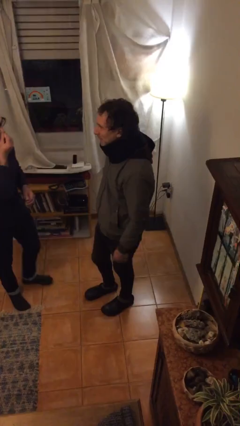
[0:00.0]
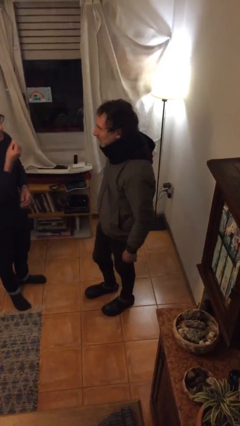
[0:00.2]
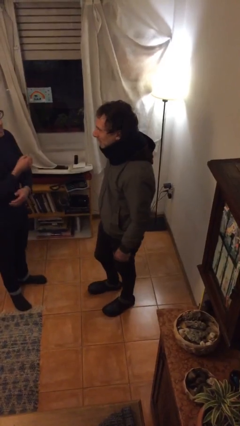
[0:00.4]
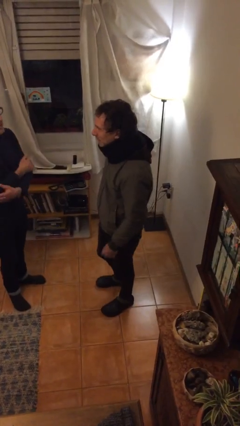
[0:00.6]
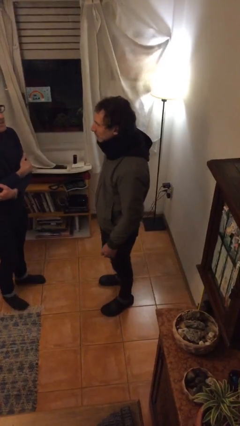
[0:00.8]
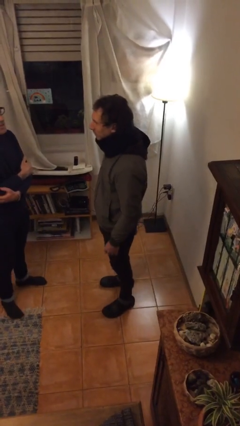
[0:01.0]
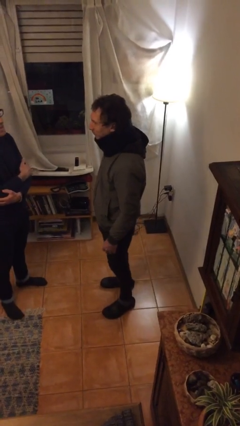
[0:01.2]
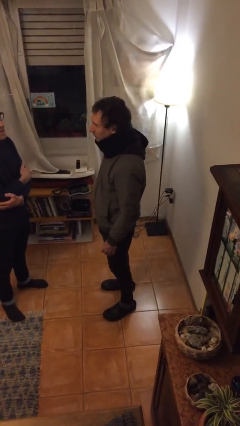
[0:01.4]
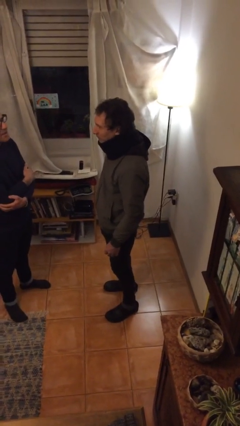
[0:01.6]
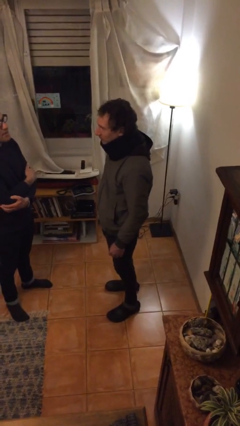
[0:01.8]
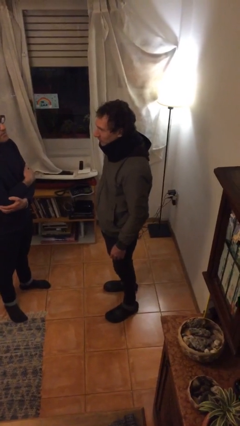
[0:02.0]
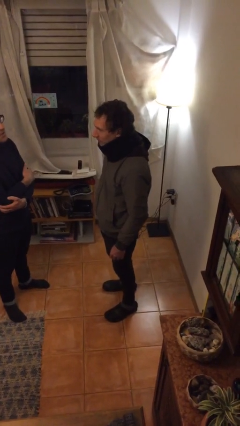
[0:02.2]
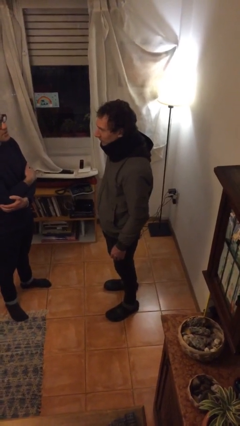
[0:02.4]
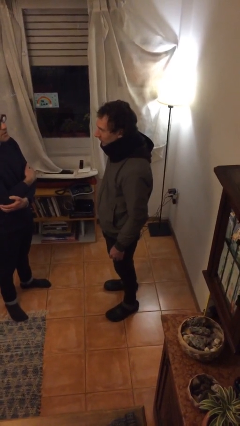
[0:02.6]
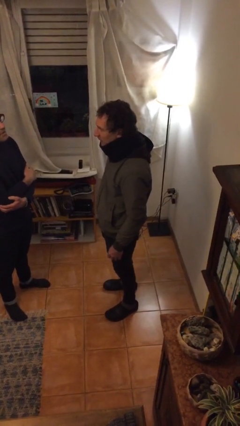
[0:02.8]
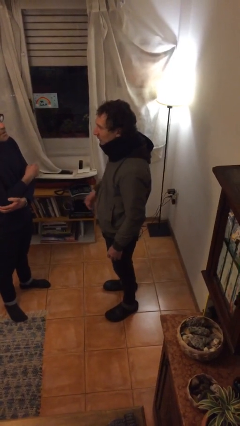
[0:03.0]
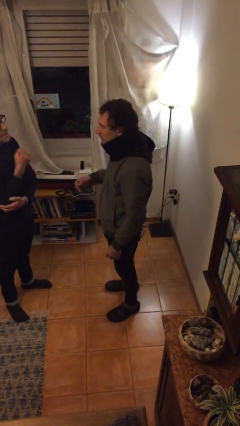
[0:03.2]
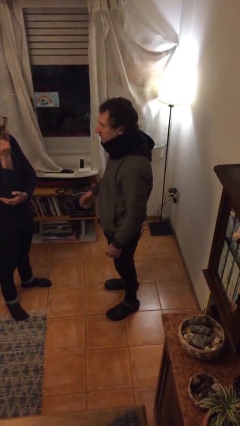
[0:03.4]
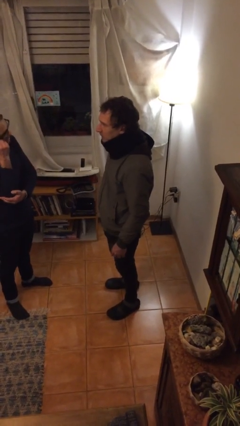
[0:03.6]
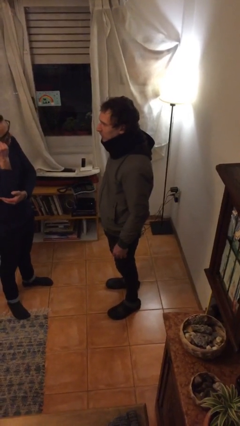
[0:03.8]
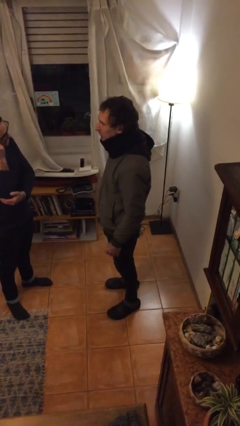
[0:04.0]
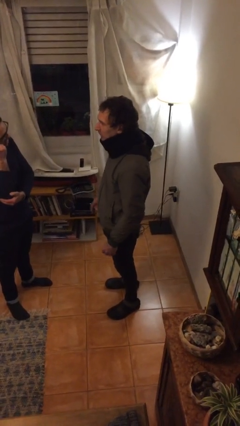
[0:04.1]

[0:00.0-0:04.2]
person talks to person

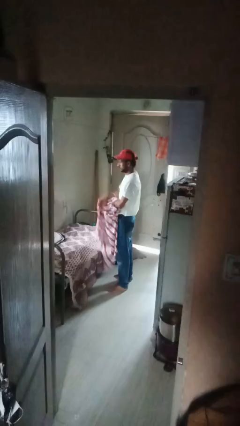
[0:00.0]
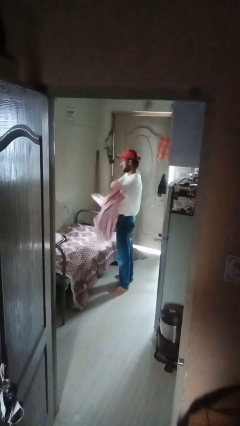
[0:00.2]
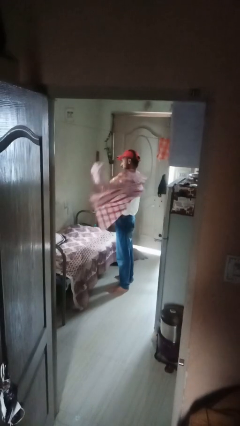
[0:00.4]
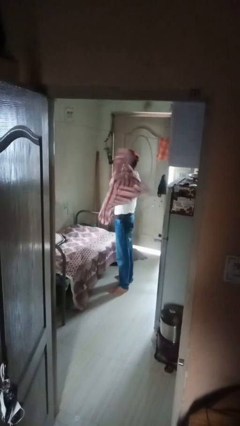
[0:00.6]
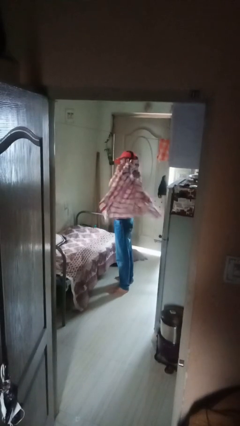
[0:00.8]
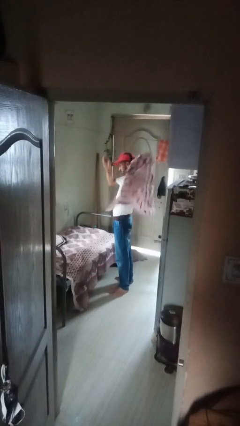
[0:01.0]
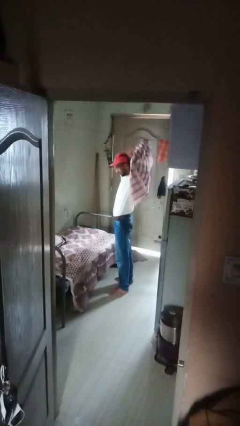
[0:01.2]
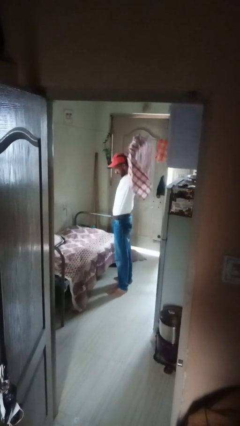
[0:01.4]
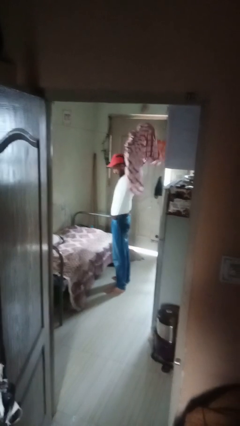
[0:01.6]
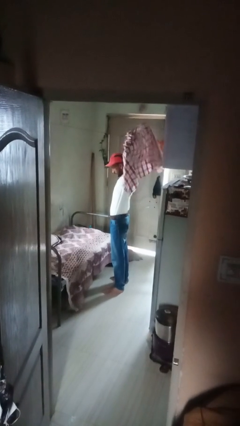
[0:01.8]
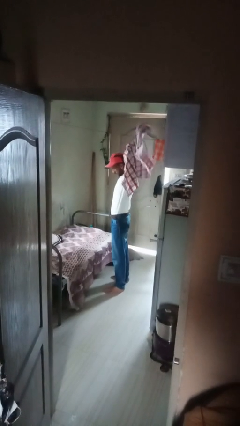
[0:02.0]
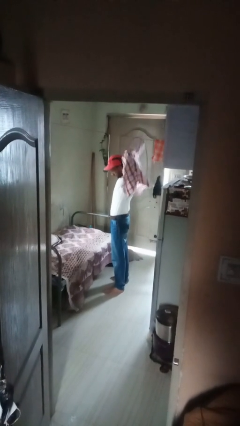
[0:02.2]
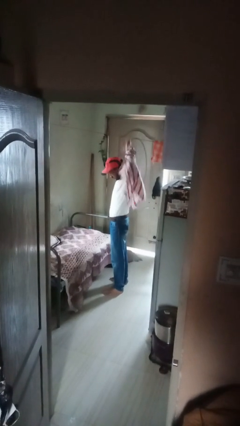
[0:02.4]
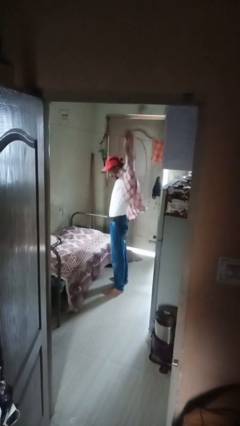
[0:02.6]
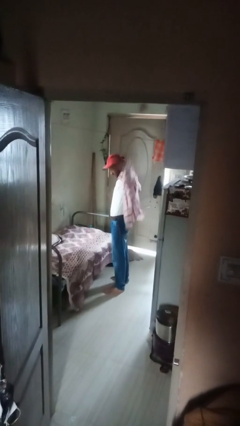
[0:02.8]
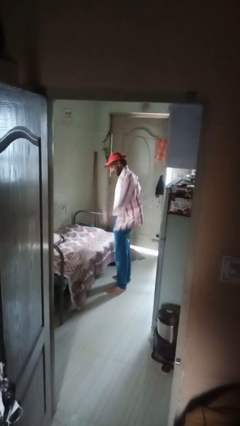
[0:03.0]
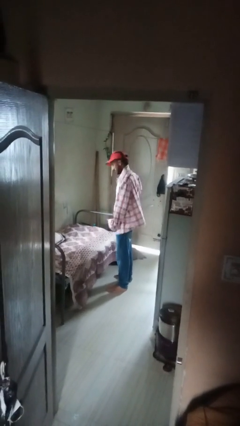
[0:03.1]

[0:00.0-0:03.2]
person puts on shirt

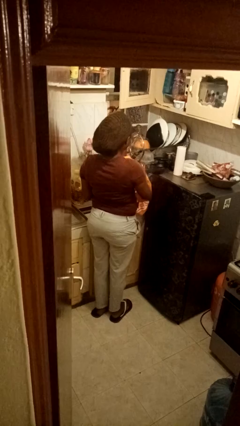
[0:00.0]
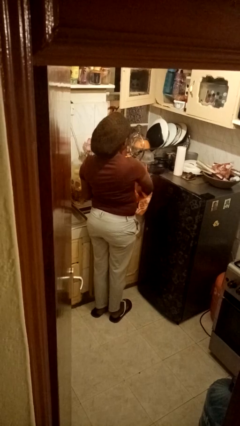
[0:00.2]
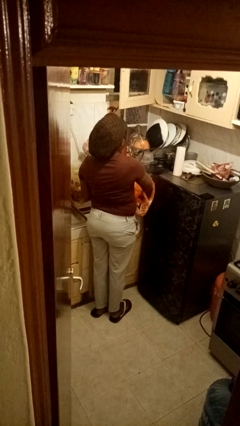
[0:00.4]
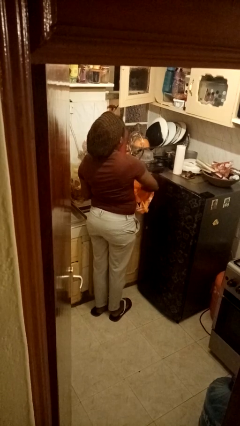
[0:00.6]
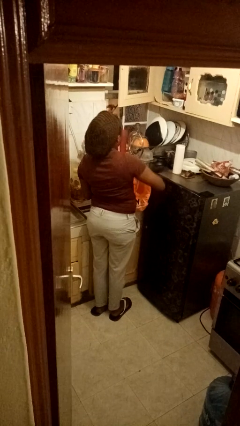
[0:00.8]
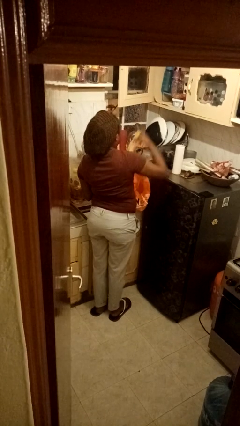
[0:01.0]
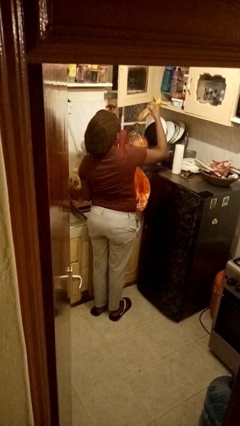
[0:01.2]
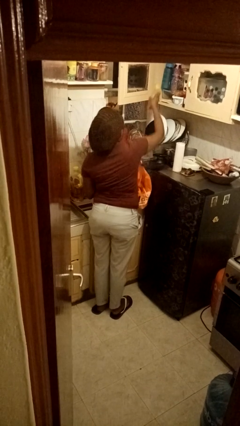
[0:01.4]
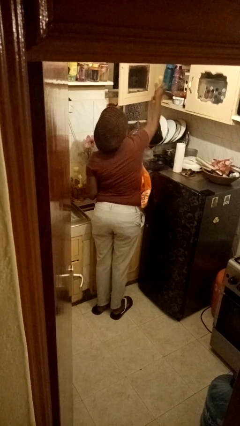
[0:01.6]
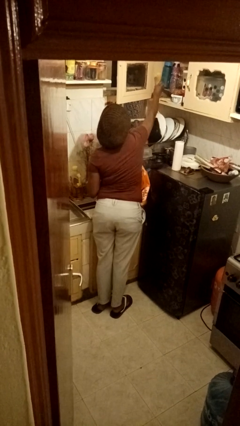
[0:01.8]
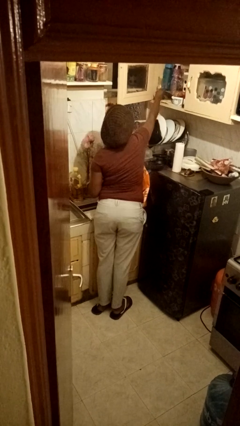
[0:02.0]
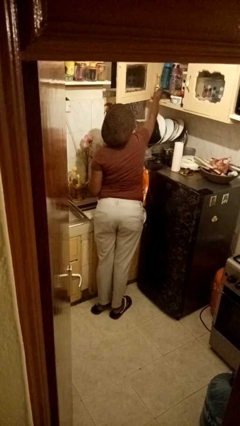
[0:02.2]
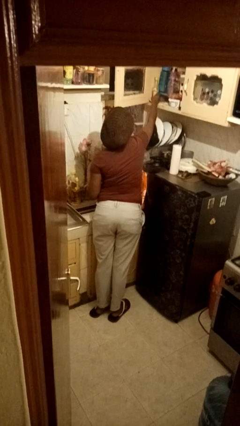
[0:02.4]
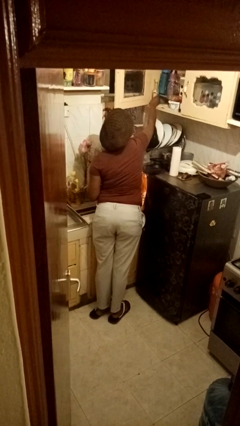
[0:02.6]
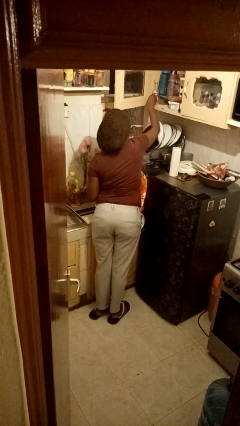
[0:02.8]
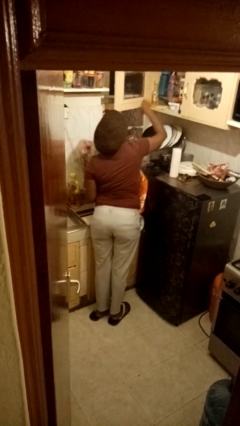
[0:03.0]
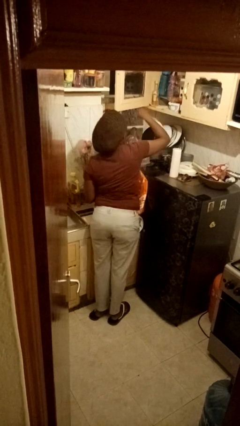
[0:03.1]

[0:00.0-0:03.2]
person loads groceries into cabinet

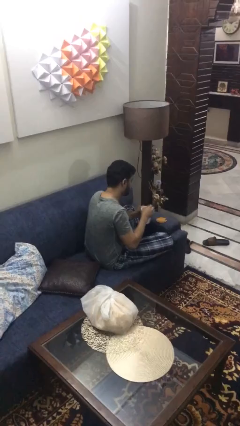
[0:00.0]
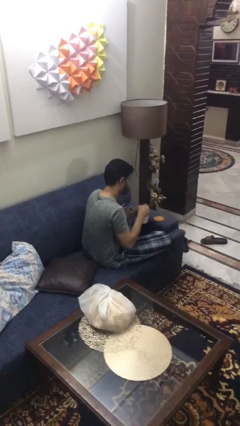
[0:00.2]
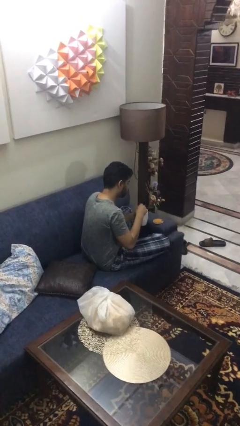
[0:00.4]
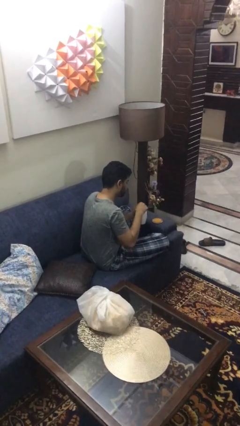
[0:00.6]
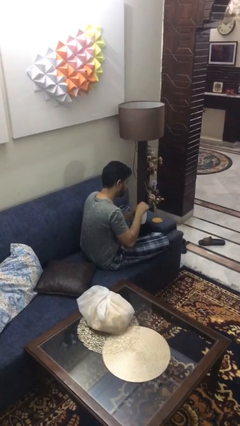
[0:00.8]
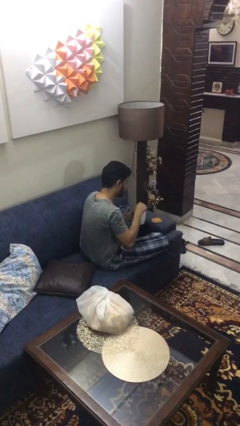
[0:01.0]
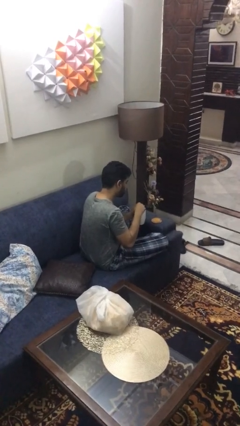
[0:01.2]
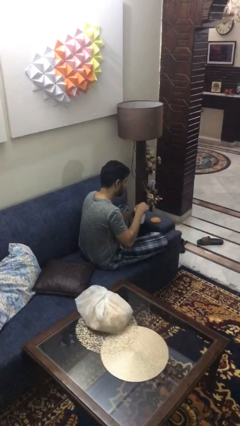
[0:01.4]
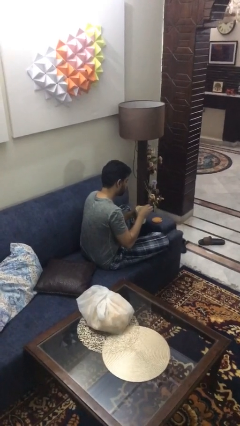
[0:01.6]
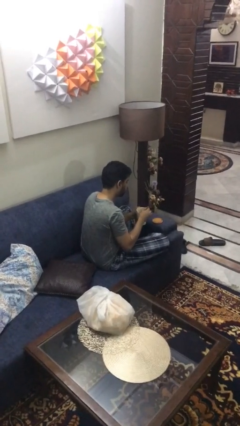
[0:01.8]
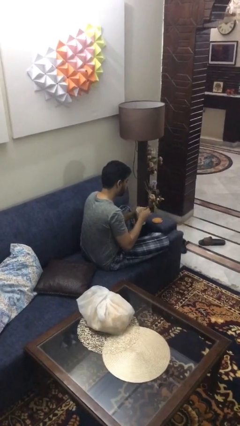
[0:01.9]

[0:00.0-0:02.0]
person stirs mug

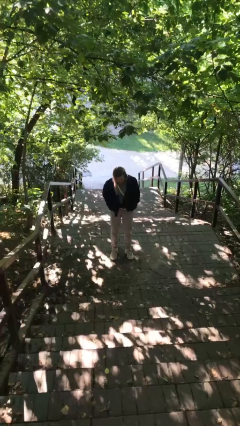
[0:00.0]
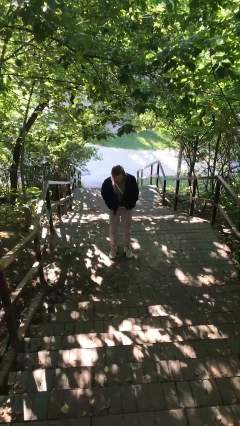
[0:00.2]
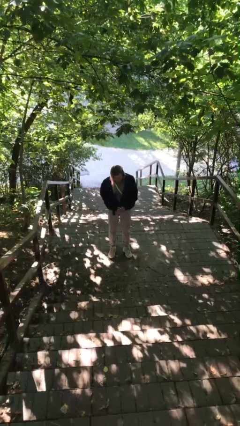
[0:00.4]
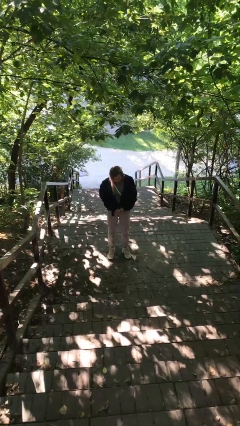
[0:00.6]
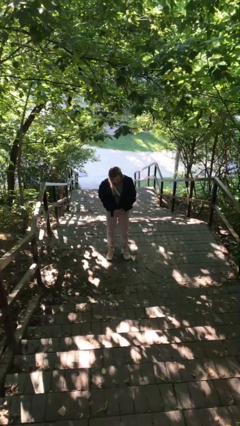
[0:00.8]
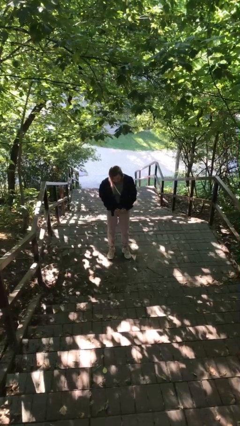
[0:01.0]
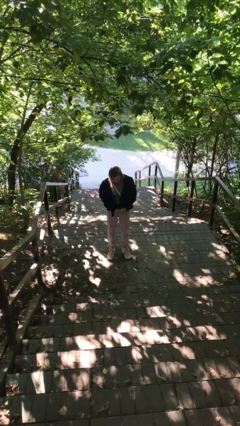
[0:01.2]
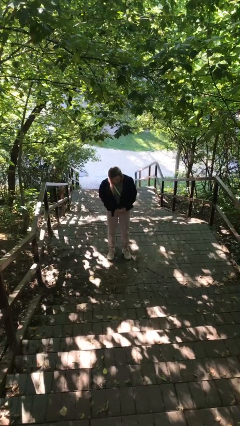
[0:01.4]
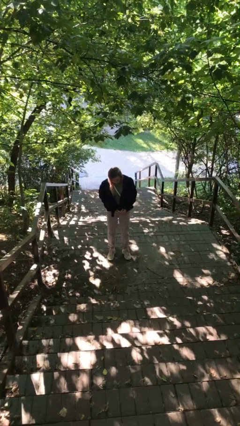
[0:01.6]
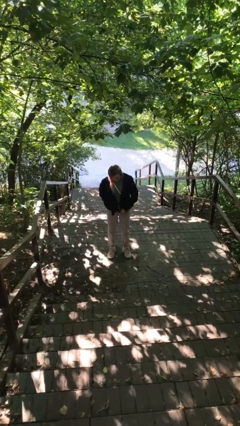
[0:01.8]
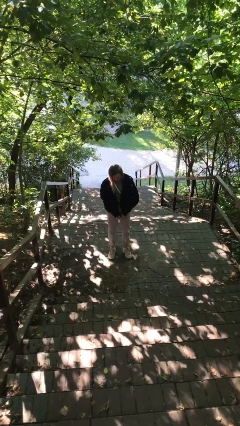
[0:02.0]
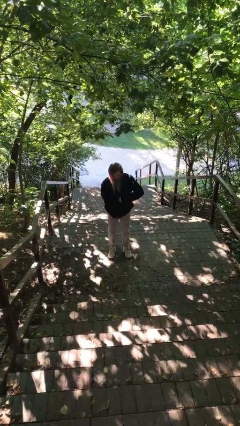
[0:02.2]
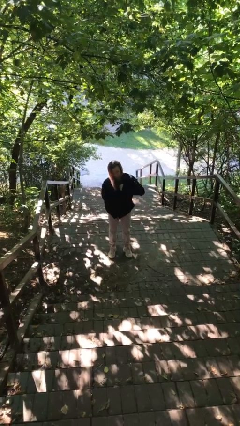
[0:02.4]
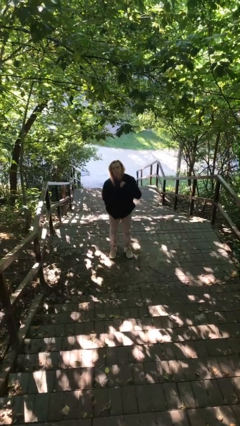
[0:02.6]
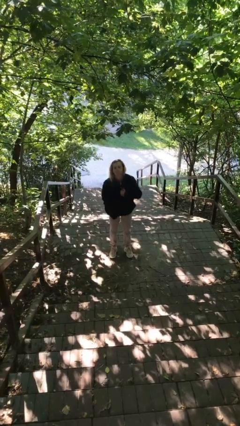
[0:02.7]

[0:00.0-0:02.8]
person zips up jacket

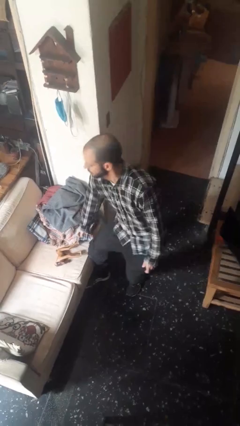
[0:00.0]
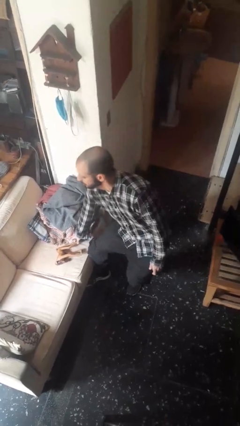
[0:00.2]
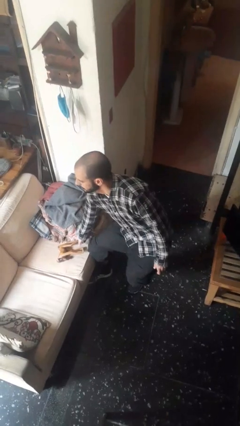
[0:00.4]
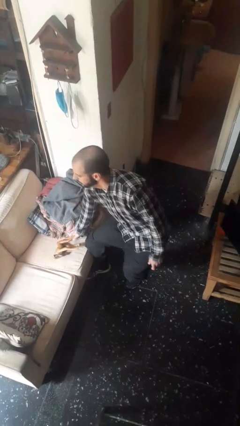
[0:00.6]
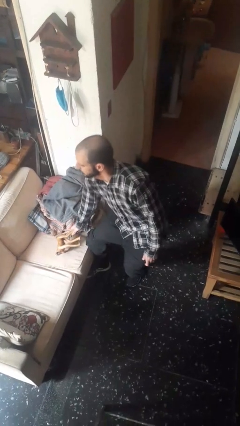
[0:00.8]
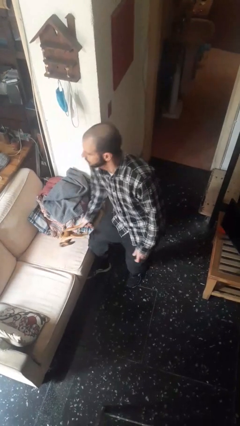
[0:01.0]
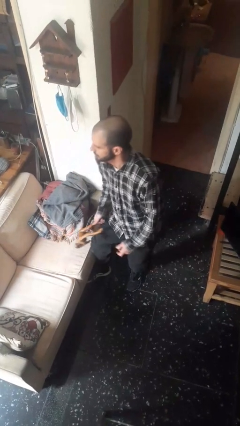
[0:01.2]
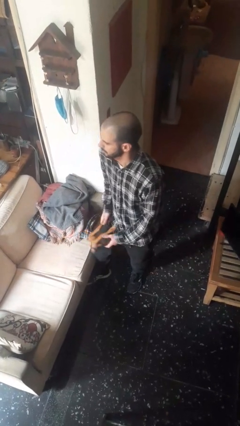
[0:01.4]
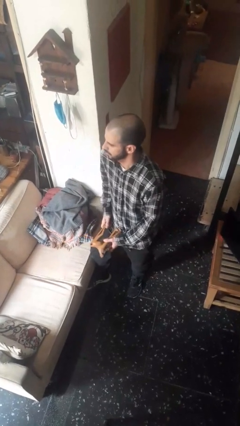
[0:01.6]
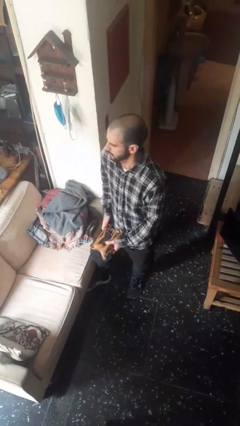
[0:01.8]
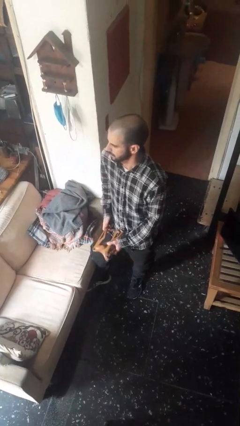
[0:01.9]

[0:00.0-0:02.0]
person picks up object from couch

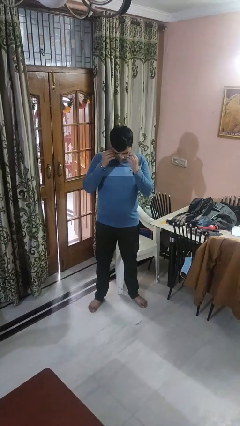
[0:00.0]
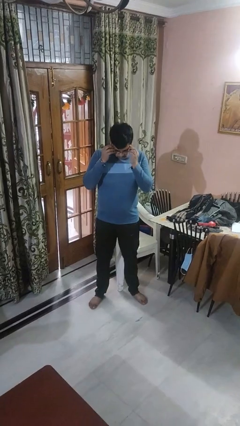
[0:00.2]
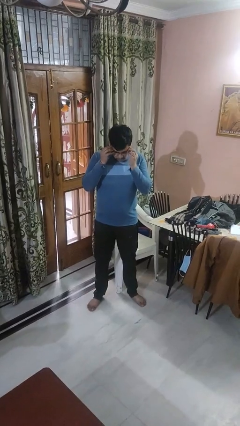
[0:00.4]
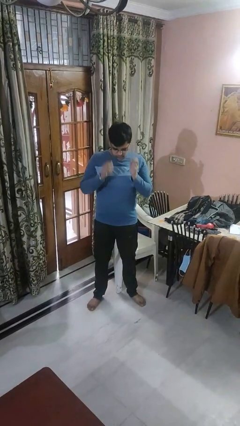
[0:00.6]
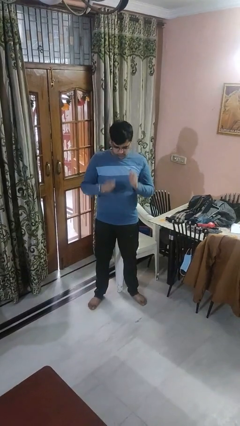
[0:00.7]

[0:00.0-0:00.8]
person puts on glasses
